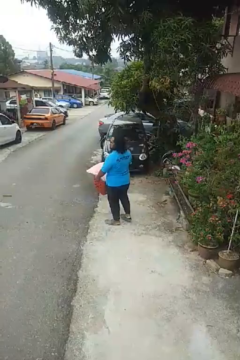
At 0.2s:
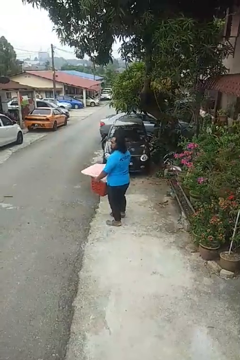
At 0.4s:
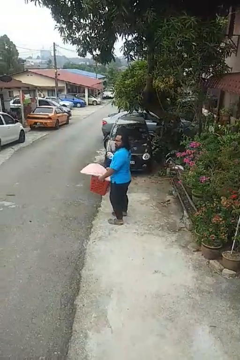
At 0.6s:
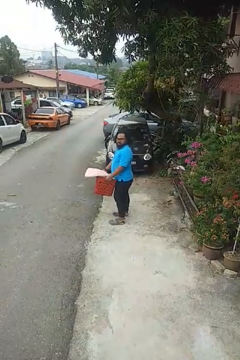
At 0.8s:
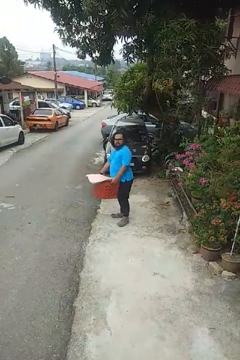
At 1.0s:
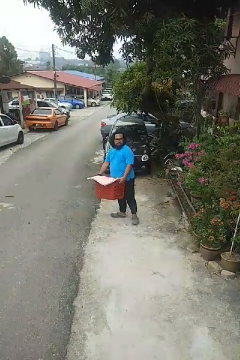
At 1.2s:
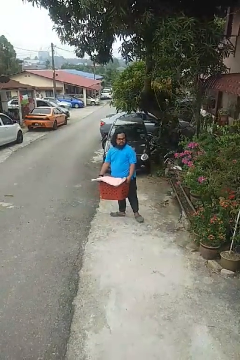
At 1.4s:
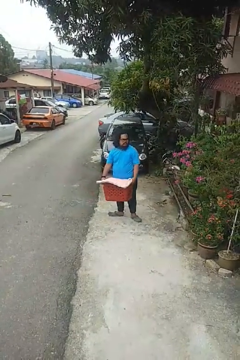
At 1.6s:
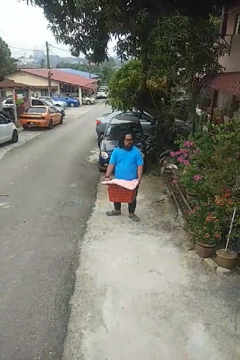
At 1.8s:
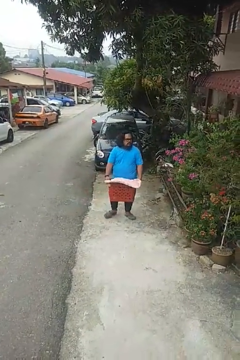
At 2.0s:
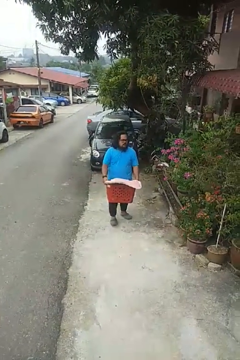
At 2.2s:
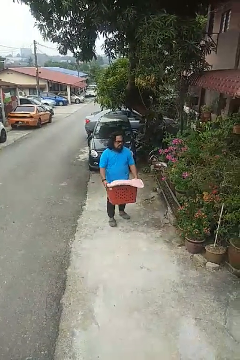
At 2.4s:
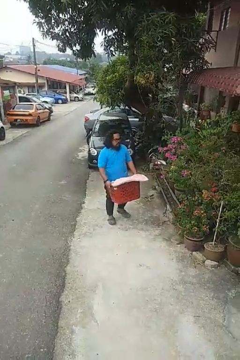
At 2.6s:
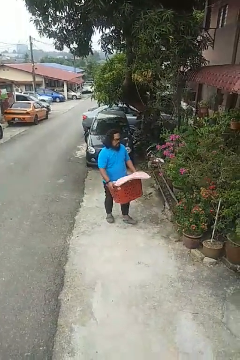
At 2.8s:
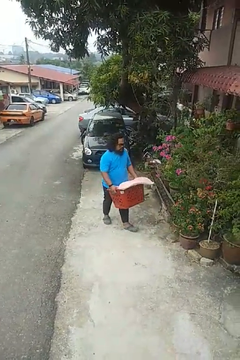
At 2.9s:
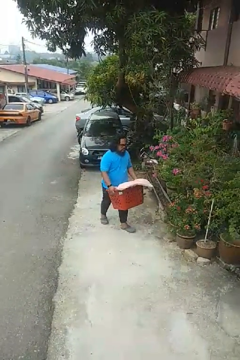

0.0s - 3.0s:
person carries laundry basket

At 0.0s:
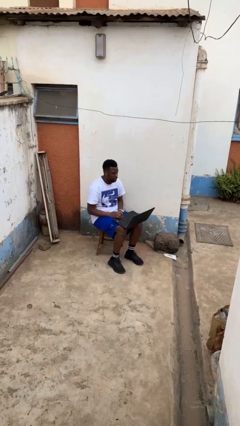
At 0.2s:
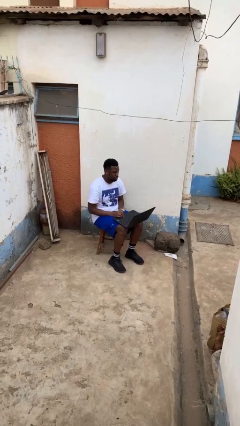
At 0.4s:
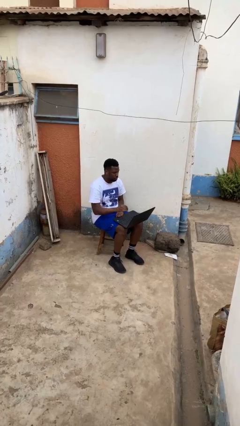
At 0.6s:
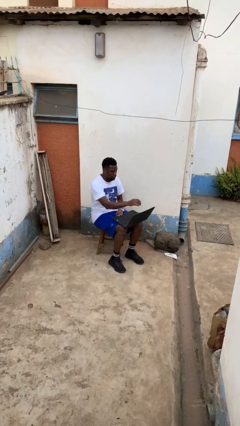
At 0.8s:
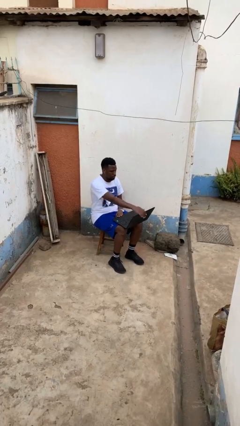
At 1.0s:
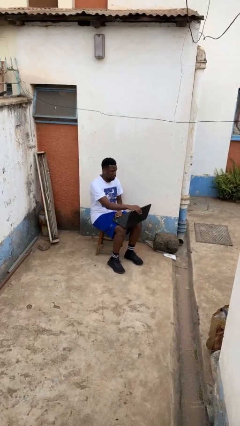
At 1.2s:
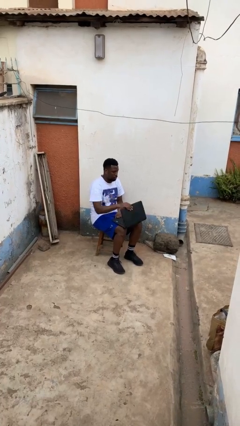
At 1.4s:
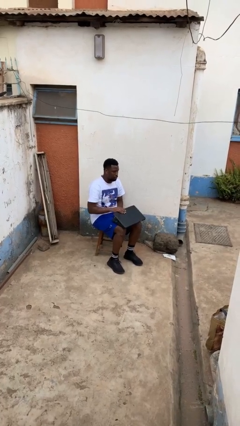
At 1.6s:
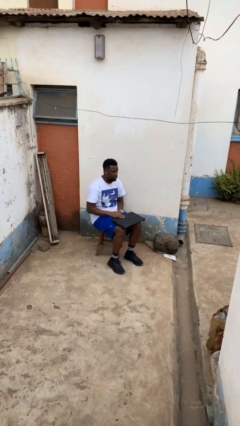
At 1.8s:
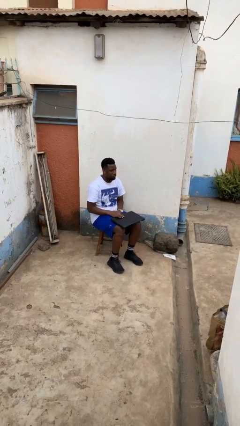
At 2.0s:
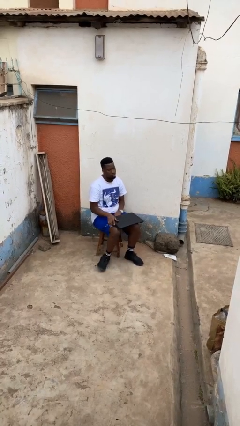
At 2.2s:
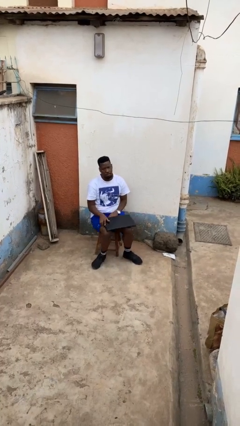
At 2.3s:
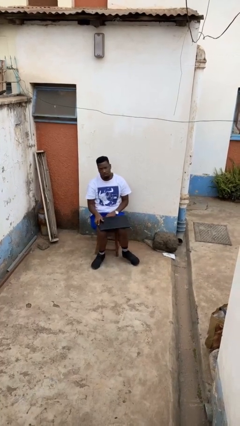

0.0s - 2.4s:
person closes laptop

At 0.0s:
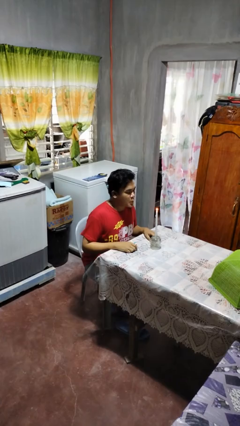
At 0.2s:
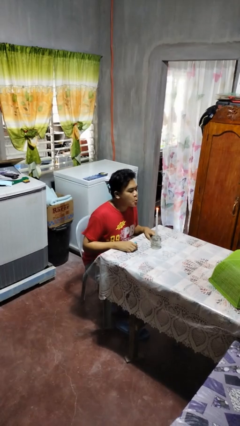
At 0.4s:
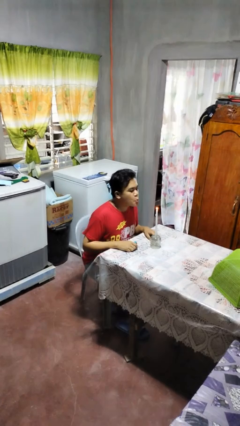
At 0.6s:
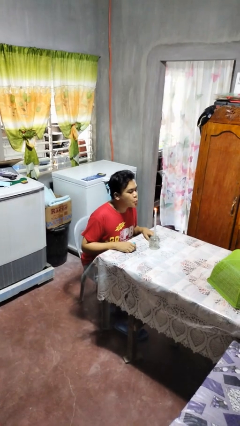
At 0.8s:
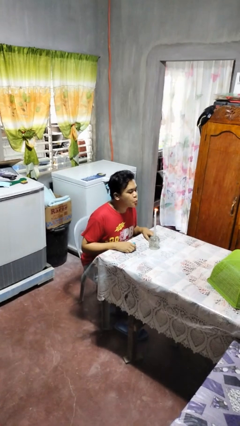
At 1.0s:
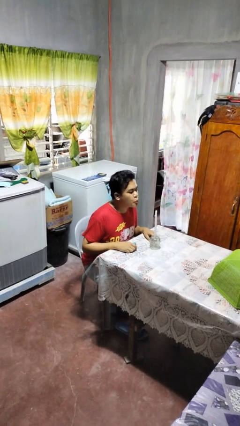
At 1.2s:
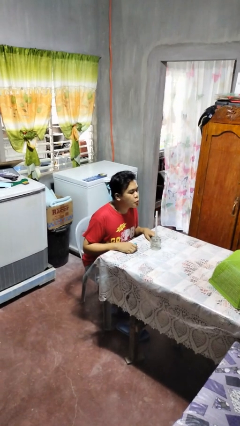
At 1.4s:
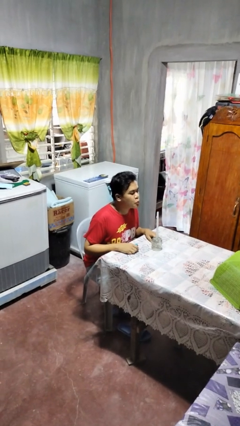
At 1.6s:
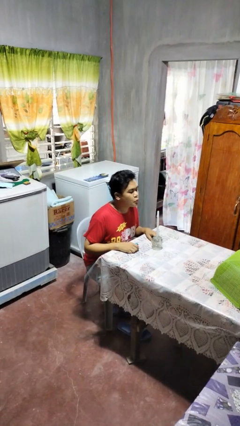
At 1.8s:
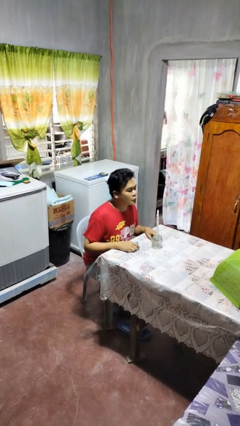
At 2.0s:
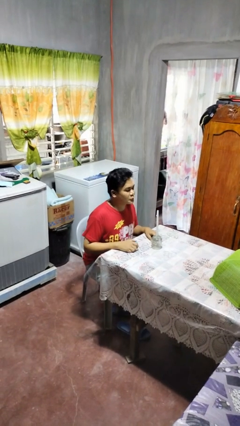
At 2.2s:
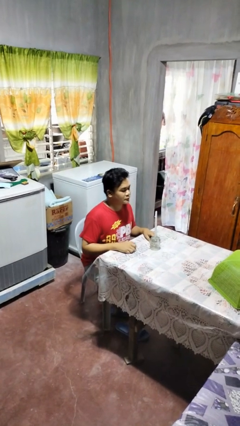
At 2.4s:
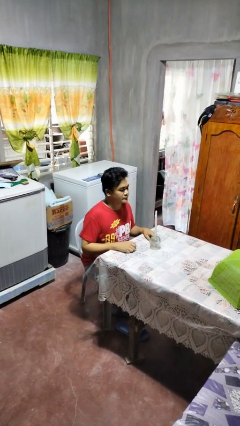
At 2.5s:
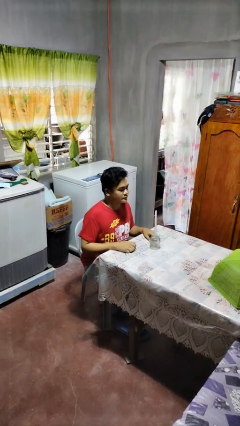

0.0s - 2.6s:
person extinguishes candle

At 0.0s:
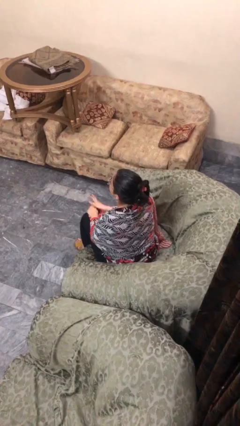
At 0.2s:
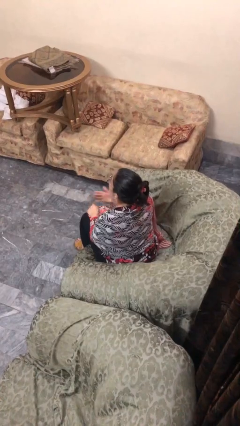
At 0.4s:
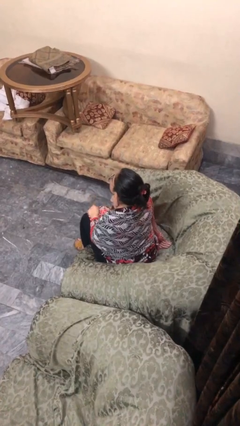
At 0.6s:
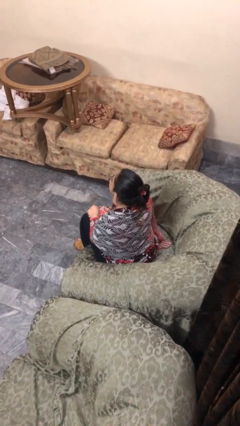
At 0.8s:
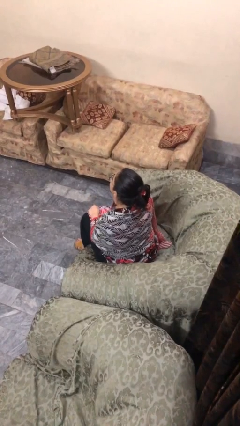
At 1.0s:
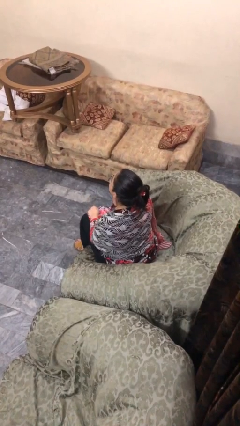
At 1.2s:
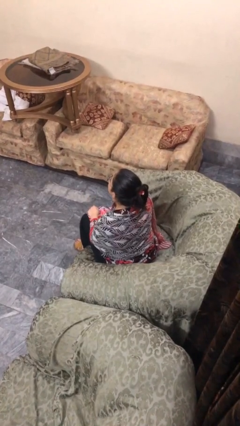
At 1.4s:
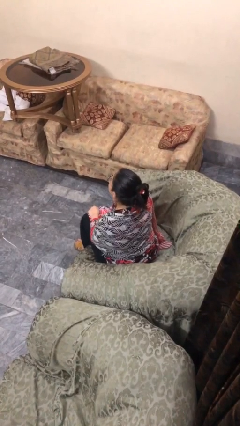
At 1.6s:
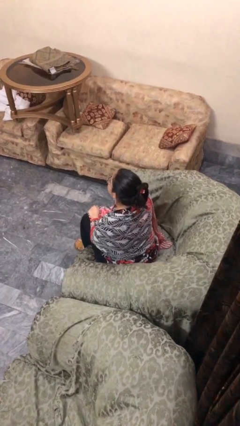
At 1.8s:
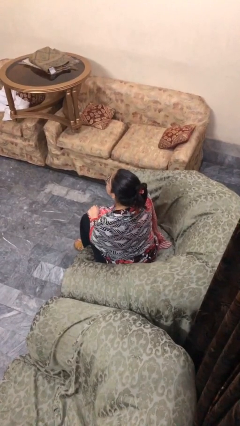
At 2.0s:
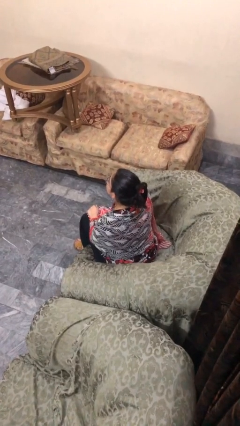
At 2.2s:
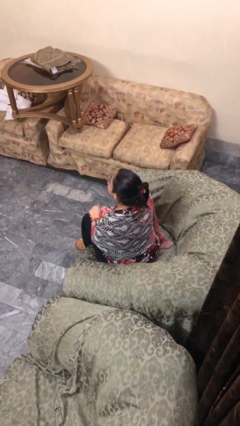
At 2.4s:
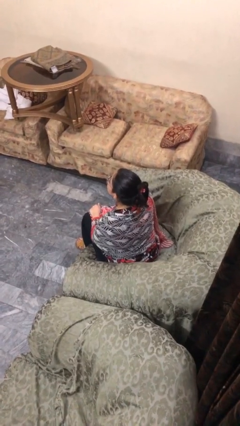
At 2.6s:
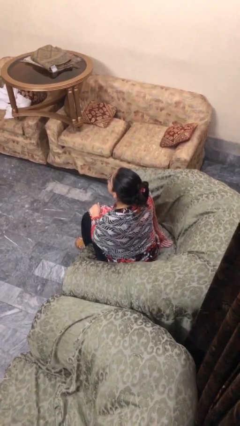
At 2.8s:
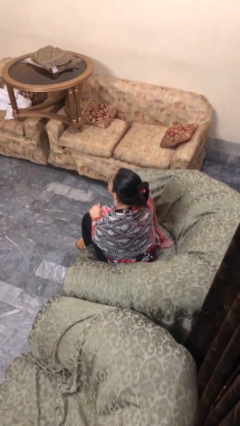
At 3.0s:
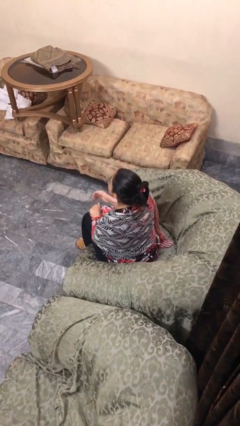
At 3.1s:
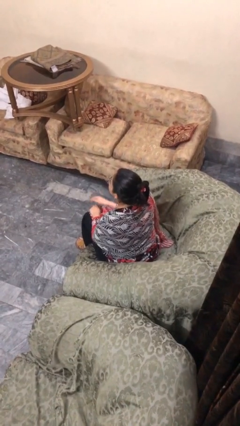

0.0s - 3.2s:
person rubs neck

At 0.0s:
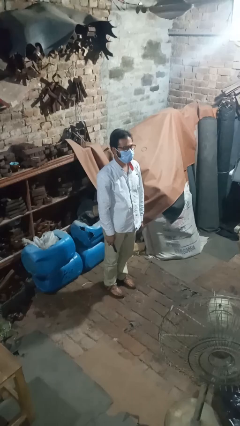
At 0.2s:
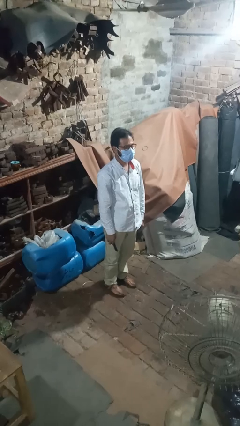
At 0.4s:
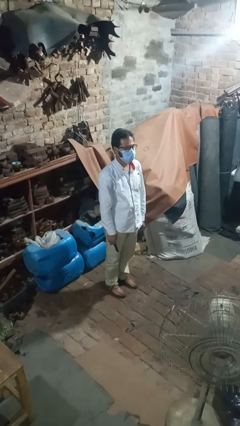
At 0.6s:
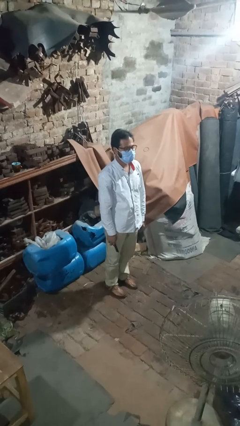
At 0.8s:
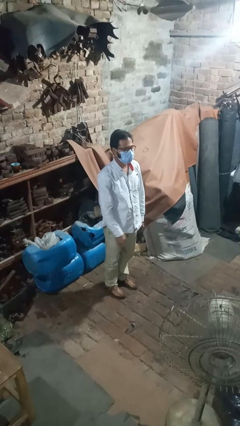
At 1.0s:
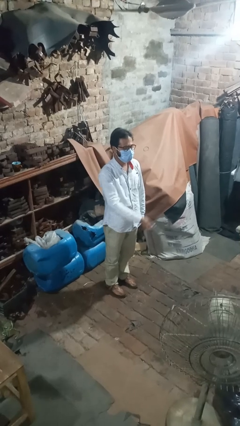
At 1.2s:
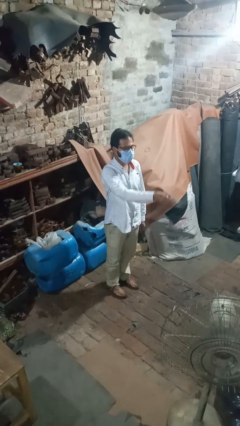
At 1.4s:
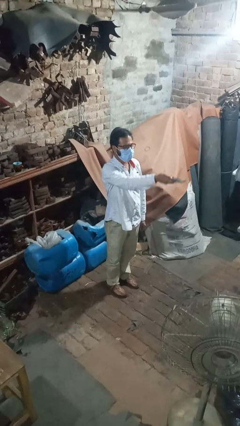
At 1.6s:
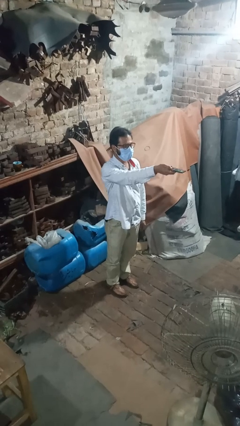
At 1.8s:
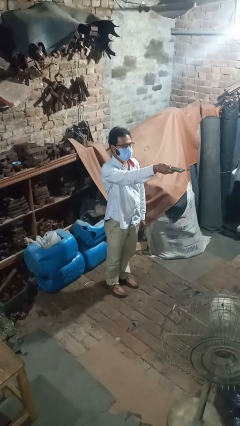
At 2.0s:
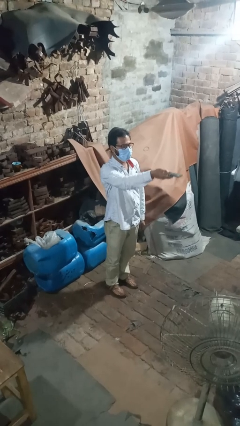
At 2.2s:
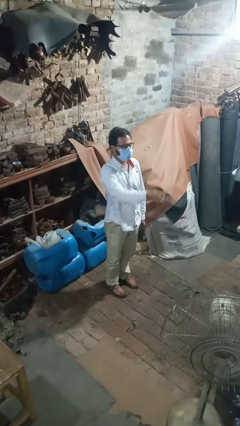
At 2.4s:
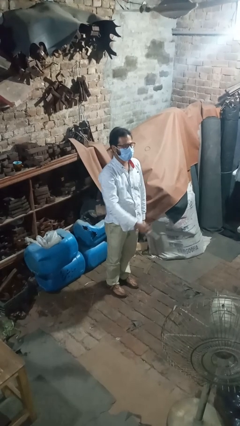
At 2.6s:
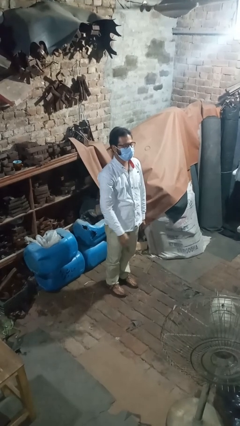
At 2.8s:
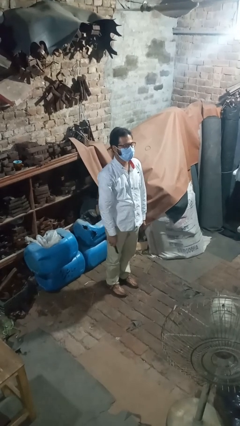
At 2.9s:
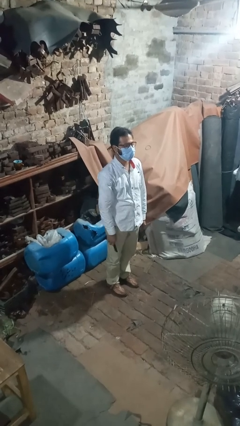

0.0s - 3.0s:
person uses television remote

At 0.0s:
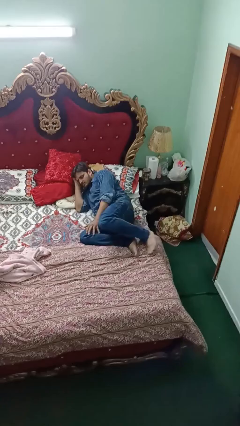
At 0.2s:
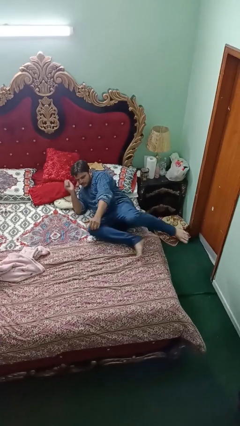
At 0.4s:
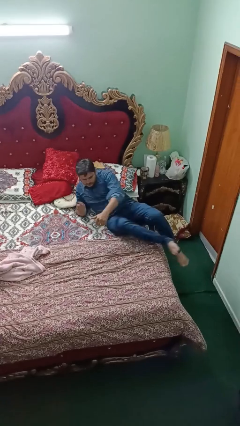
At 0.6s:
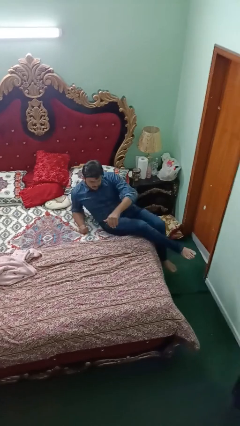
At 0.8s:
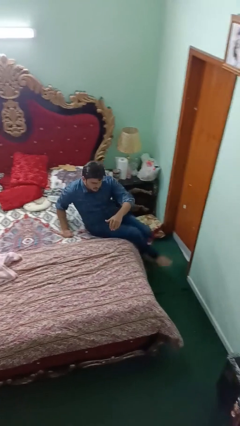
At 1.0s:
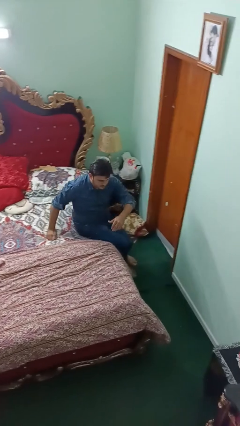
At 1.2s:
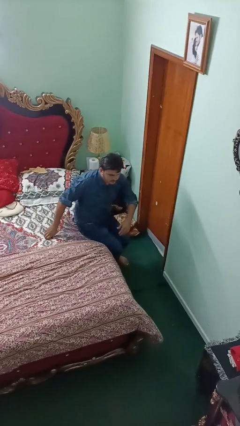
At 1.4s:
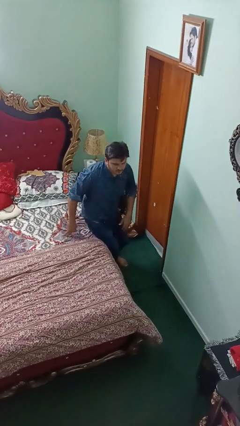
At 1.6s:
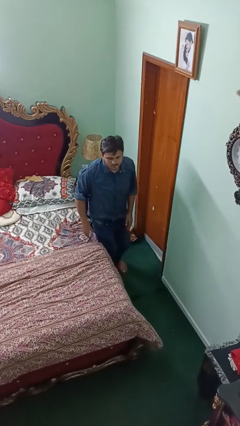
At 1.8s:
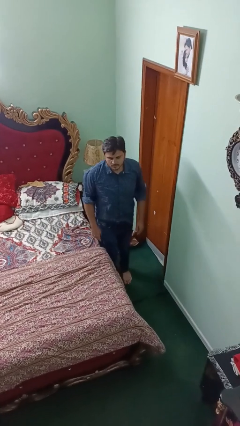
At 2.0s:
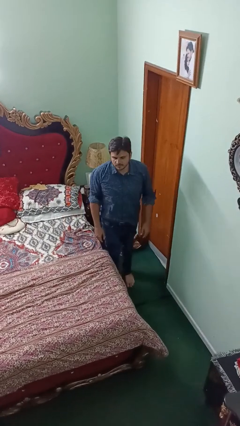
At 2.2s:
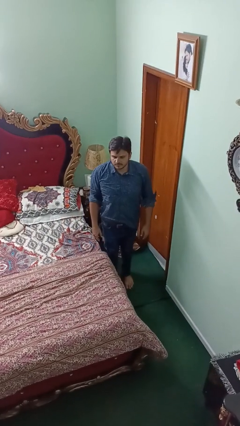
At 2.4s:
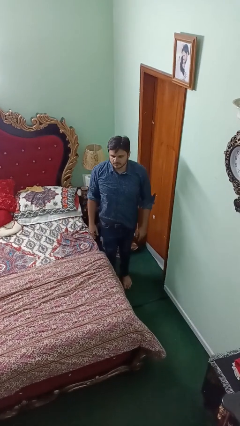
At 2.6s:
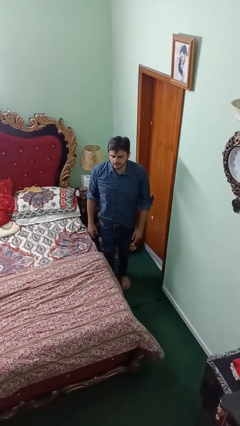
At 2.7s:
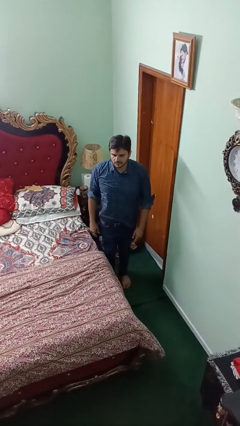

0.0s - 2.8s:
person stands up

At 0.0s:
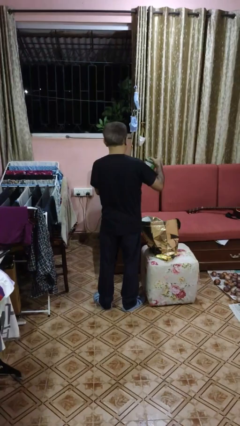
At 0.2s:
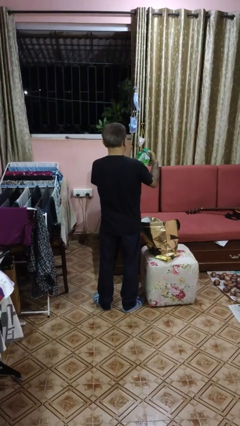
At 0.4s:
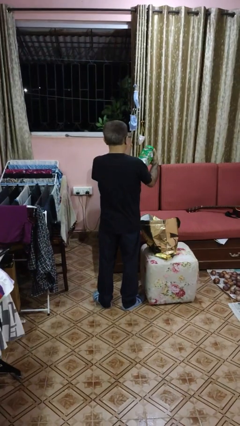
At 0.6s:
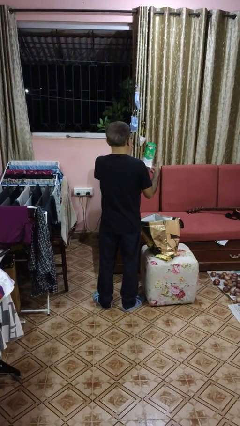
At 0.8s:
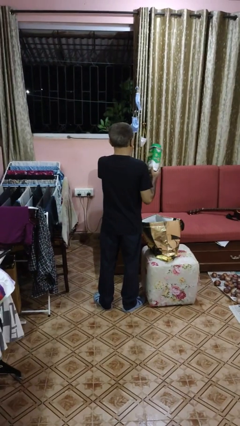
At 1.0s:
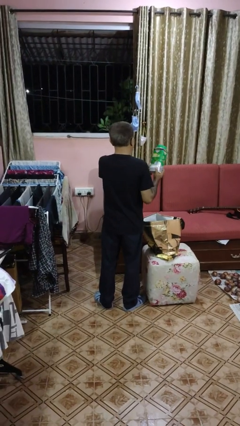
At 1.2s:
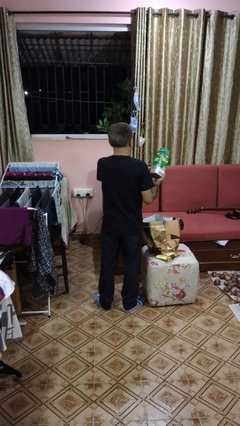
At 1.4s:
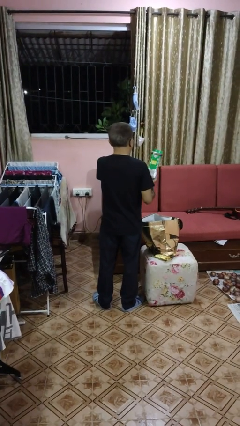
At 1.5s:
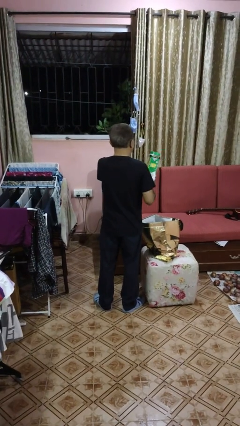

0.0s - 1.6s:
person takes object from bag
